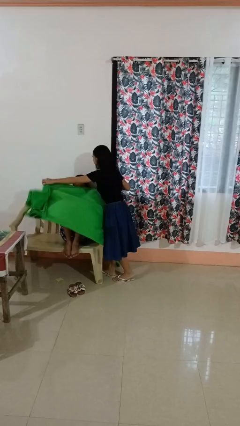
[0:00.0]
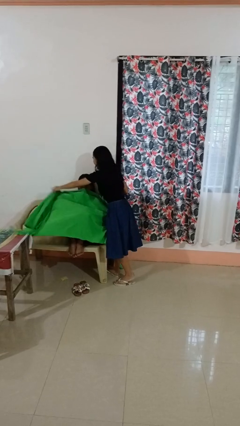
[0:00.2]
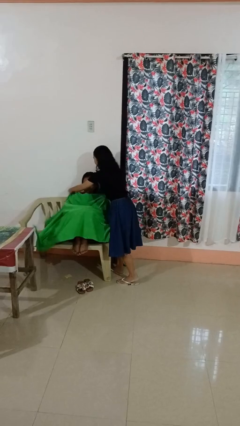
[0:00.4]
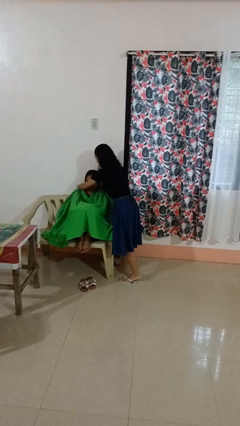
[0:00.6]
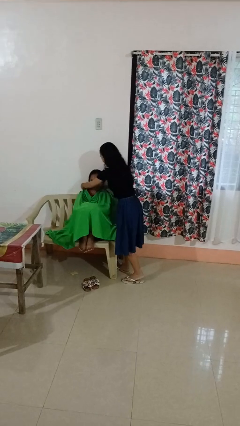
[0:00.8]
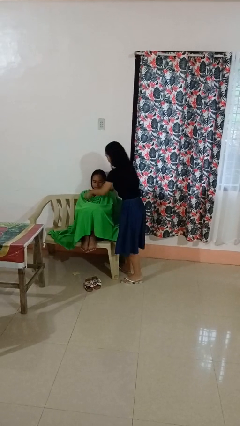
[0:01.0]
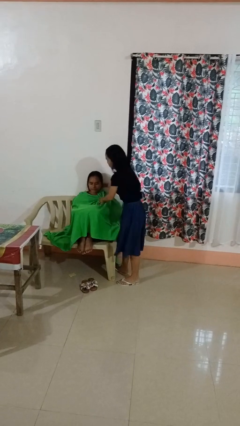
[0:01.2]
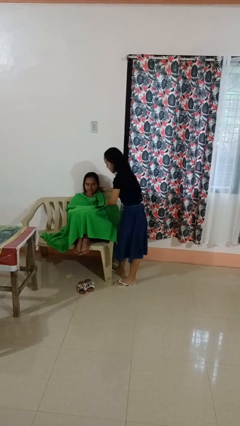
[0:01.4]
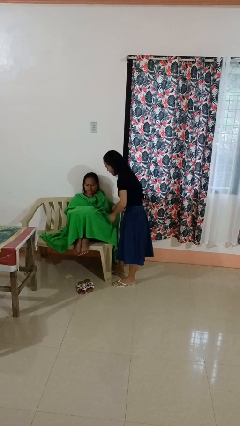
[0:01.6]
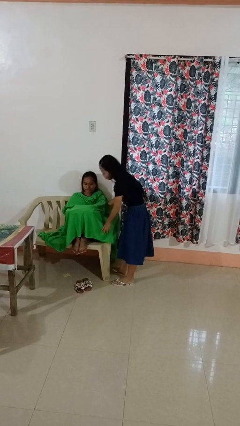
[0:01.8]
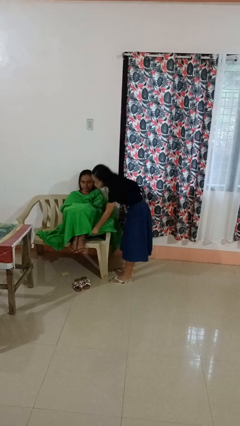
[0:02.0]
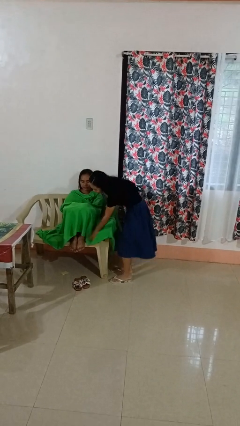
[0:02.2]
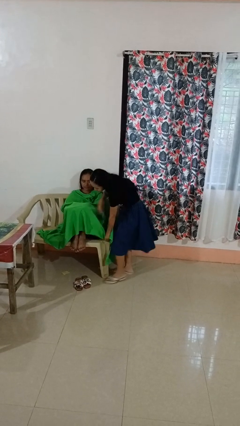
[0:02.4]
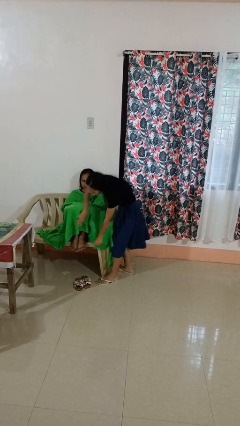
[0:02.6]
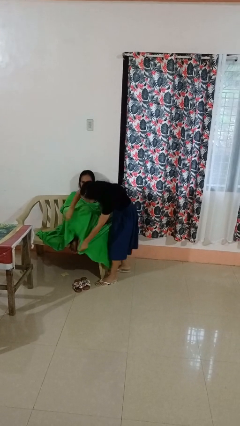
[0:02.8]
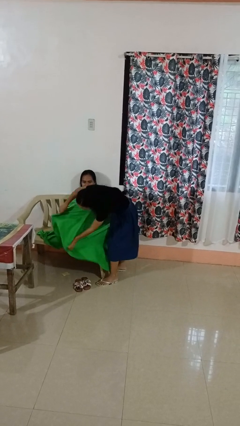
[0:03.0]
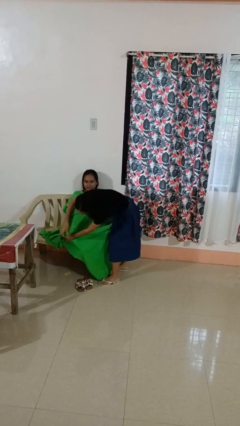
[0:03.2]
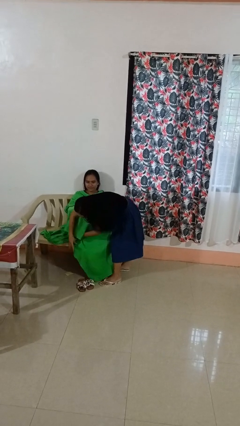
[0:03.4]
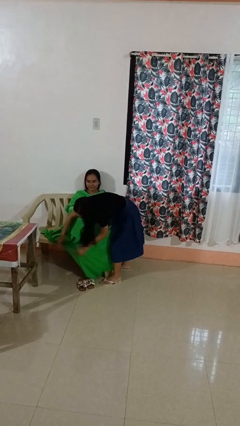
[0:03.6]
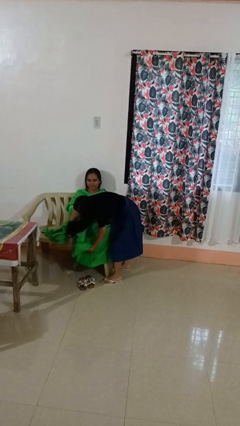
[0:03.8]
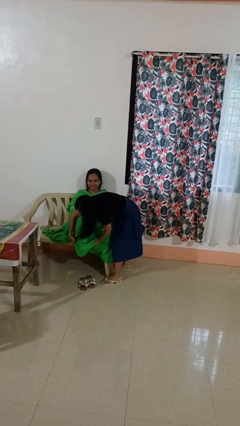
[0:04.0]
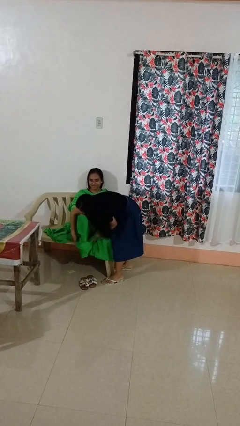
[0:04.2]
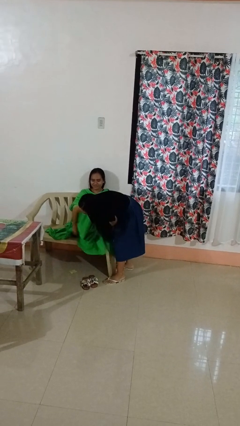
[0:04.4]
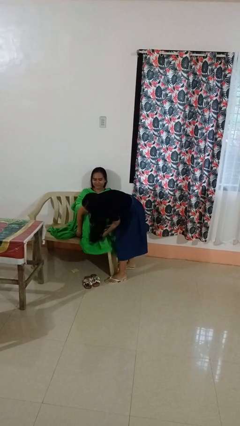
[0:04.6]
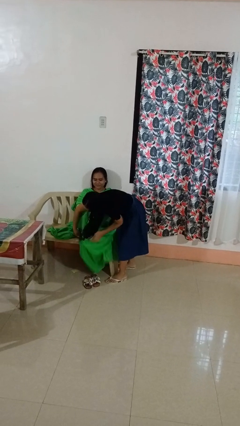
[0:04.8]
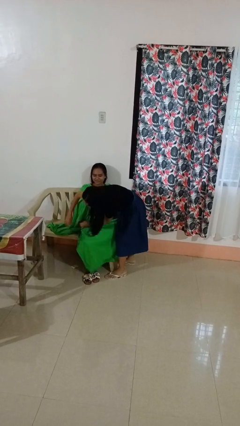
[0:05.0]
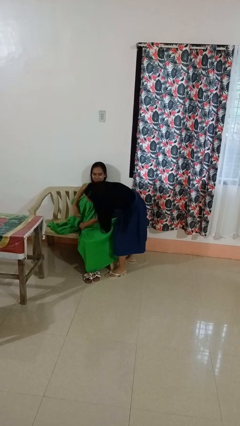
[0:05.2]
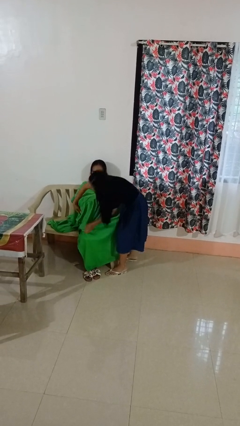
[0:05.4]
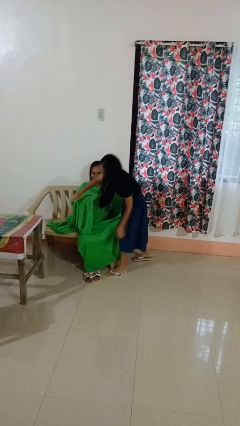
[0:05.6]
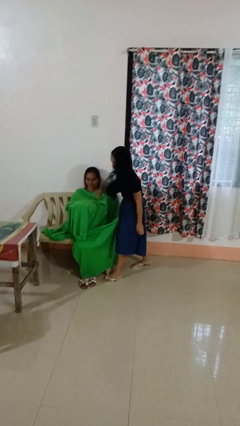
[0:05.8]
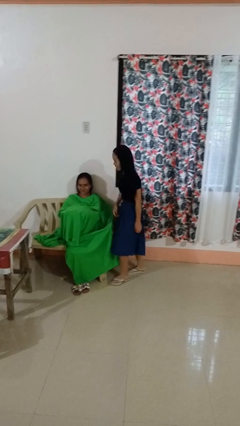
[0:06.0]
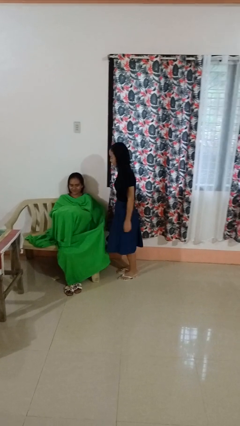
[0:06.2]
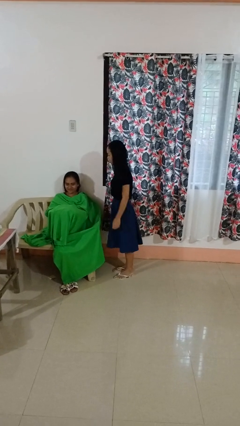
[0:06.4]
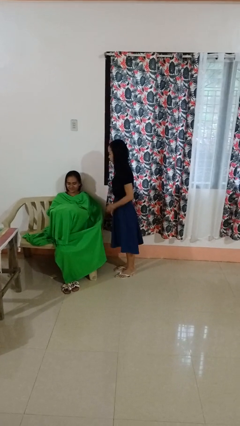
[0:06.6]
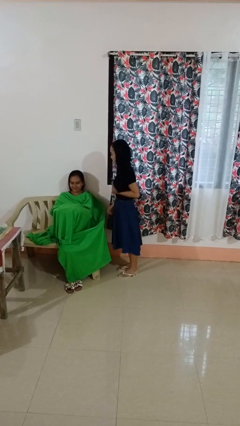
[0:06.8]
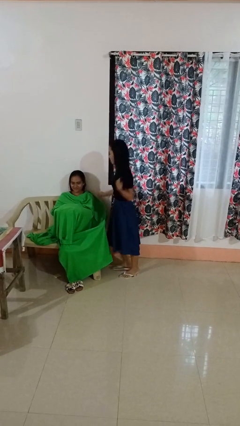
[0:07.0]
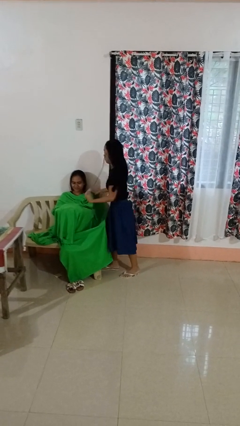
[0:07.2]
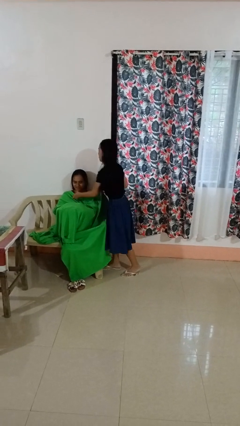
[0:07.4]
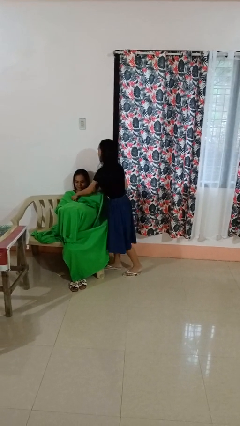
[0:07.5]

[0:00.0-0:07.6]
person covers friend with blanket

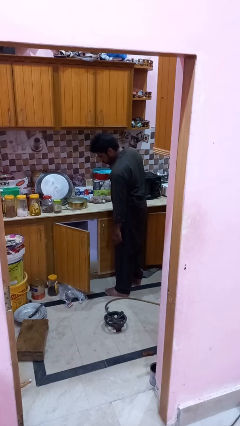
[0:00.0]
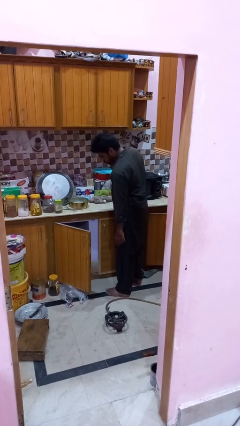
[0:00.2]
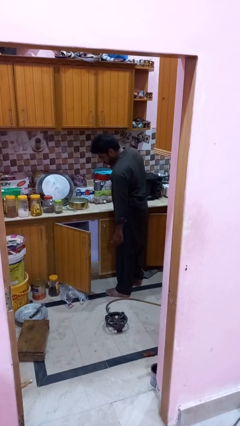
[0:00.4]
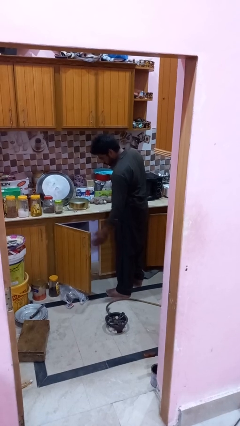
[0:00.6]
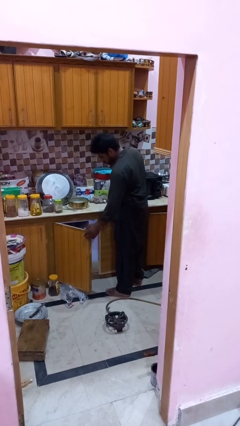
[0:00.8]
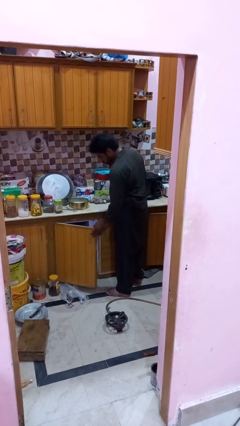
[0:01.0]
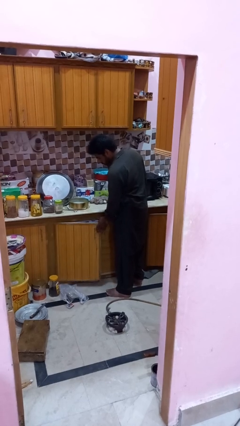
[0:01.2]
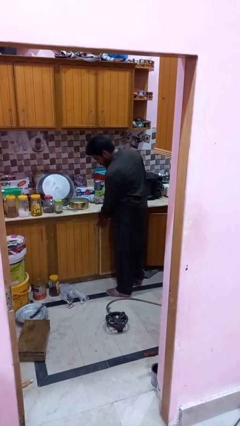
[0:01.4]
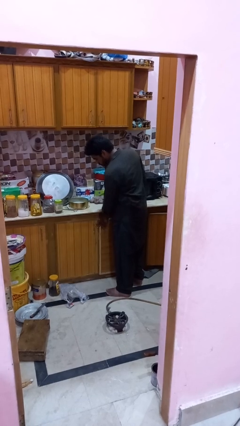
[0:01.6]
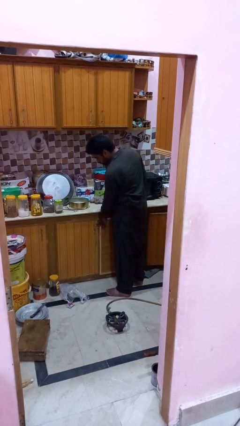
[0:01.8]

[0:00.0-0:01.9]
person closes cabinet

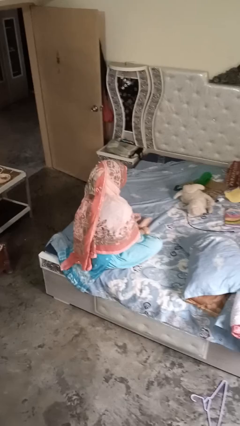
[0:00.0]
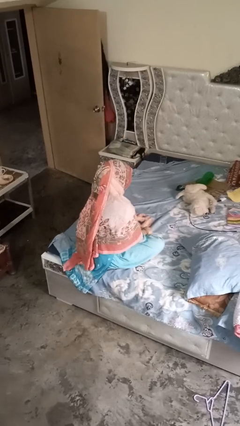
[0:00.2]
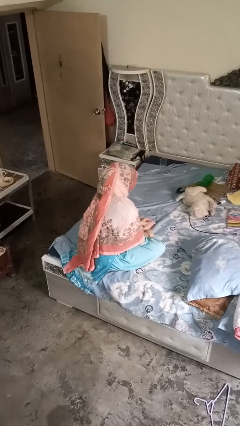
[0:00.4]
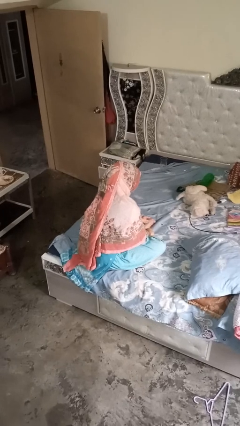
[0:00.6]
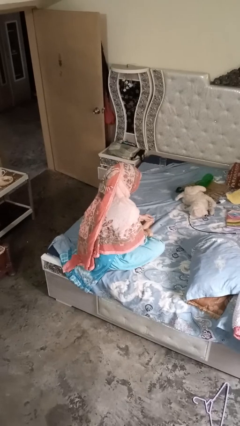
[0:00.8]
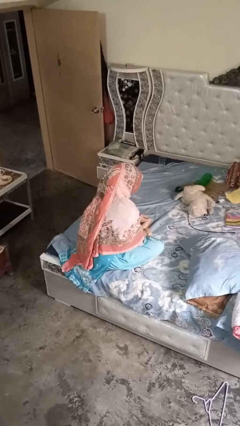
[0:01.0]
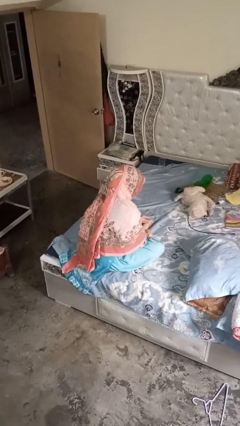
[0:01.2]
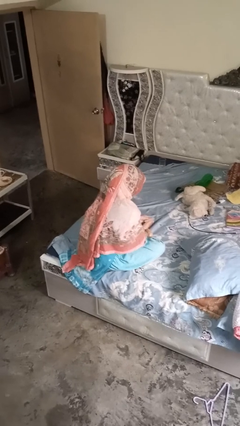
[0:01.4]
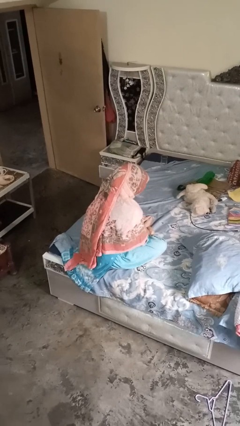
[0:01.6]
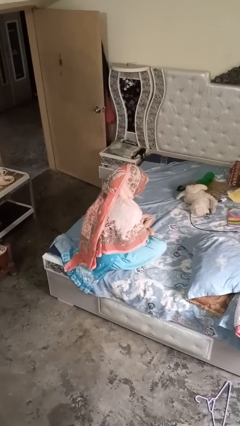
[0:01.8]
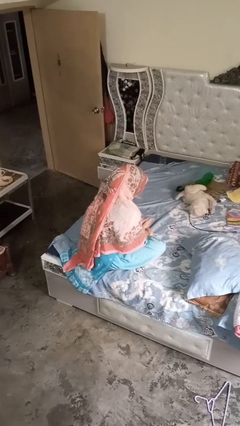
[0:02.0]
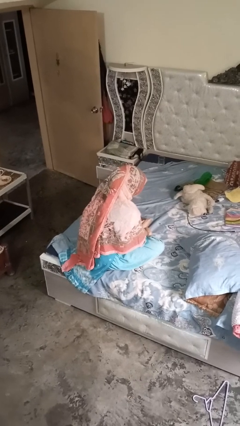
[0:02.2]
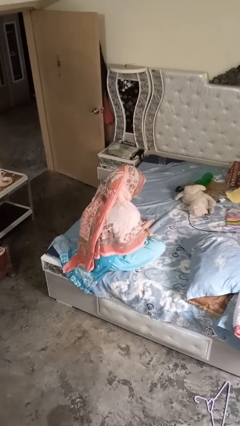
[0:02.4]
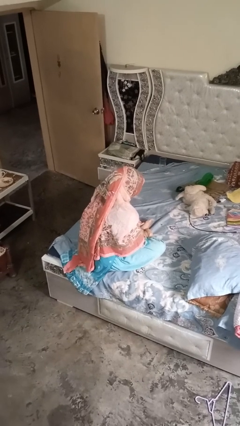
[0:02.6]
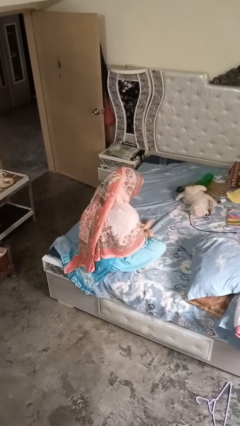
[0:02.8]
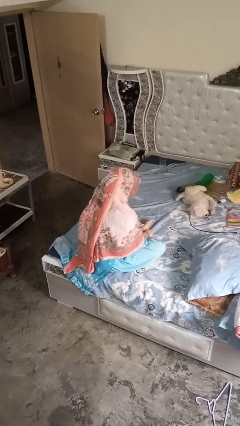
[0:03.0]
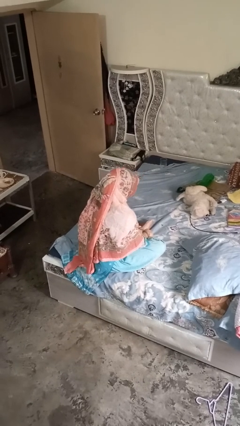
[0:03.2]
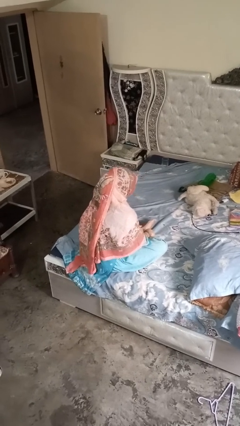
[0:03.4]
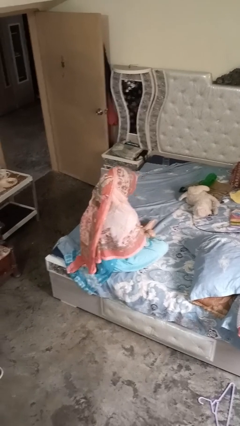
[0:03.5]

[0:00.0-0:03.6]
person rubs foot

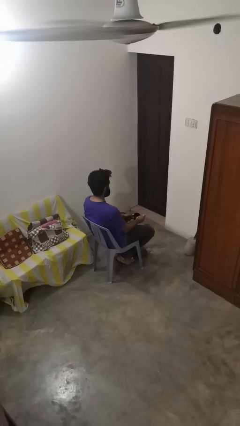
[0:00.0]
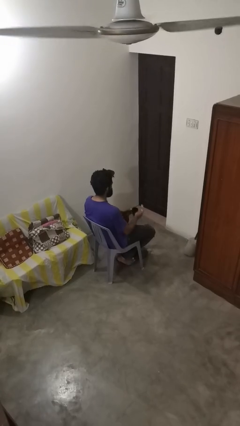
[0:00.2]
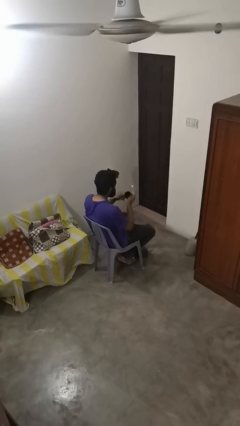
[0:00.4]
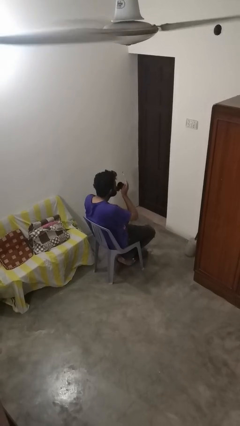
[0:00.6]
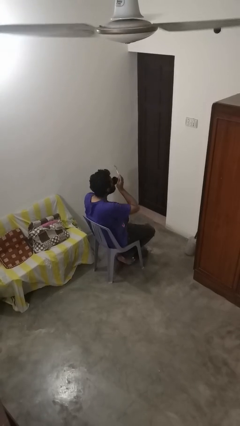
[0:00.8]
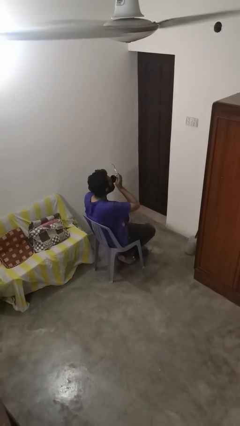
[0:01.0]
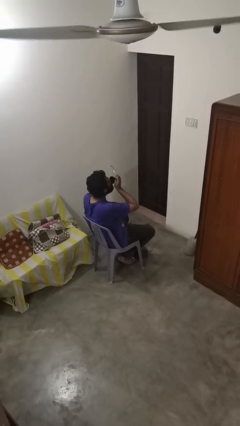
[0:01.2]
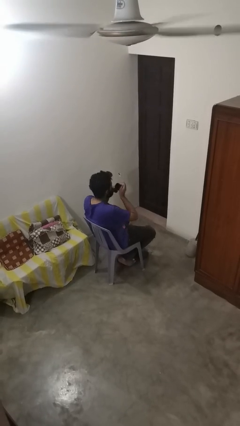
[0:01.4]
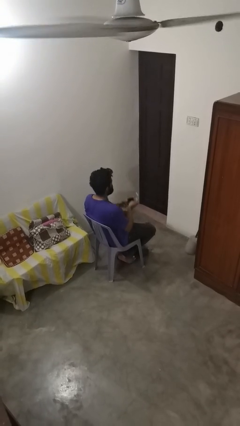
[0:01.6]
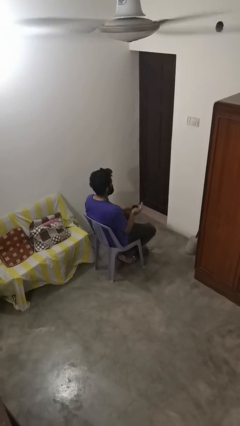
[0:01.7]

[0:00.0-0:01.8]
person drinks from mug

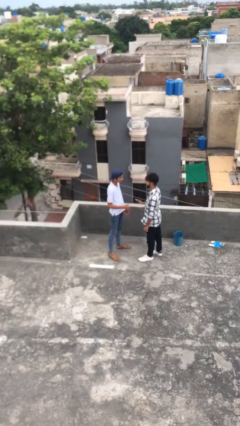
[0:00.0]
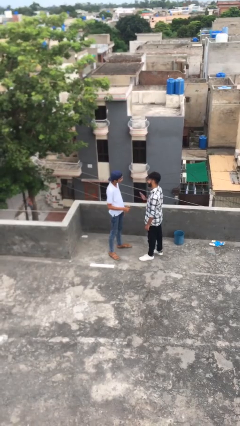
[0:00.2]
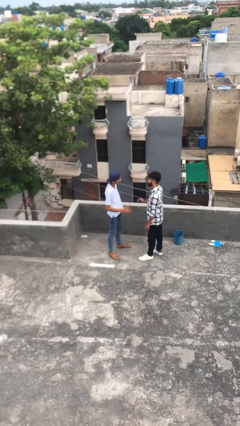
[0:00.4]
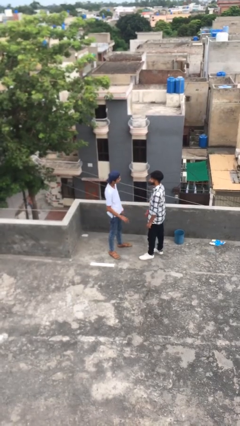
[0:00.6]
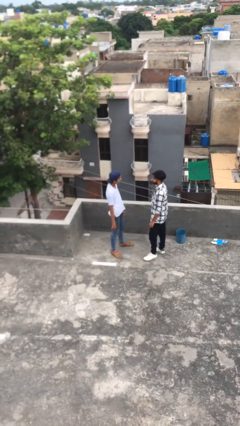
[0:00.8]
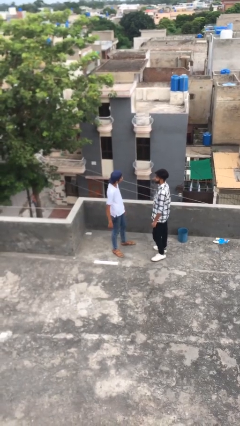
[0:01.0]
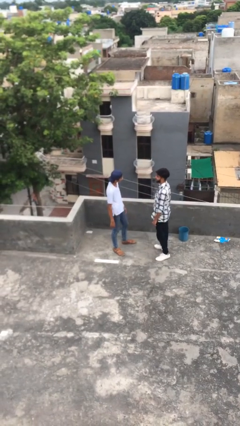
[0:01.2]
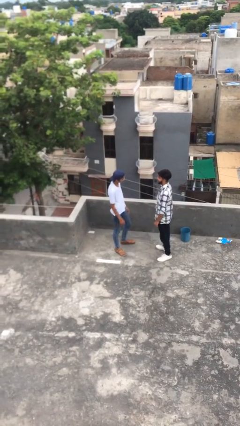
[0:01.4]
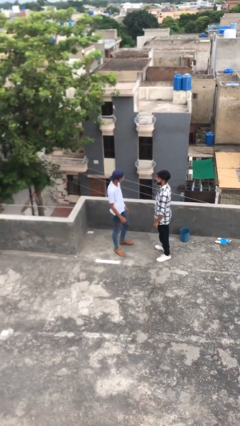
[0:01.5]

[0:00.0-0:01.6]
person talks to person

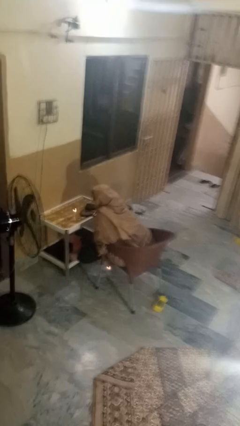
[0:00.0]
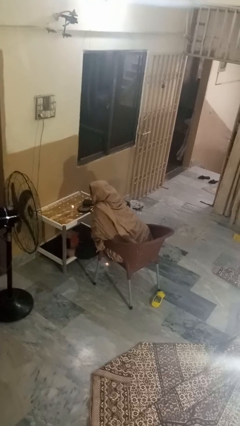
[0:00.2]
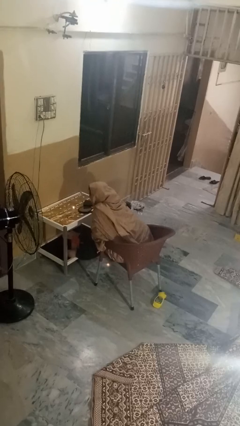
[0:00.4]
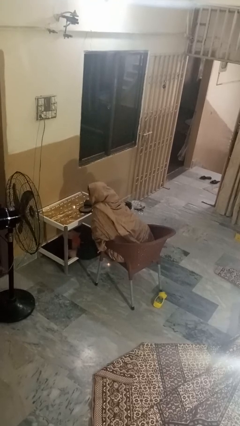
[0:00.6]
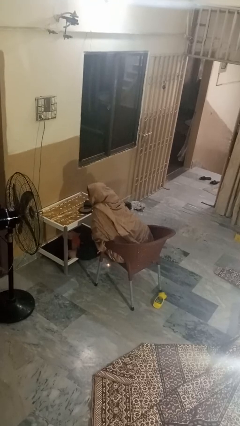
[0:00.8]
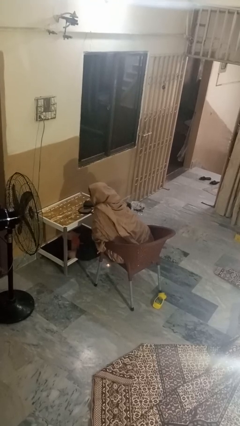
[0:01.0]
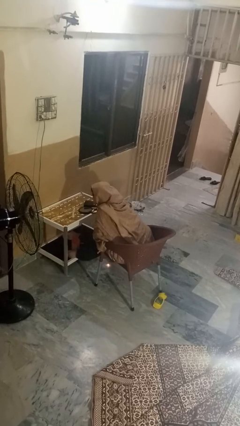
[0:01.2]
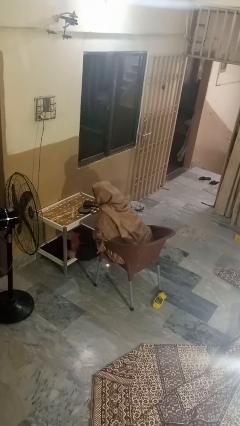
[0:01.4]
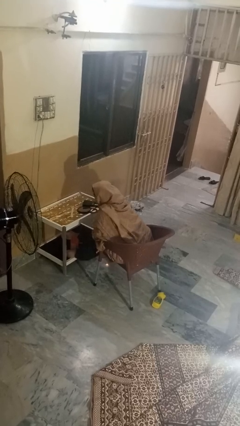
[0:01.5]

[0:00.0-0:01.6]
person extinguishes candle
